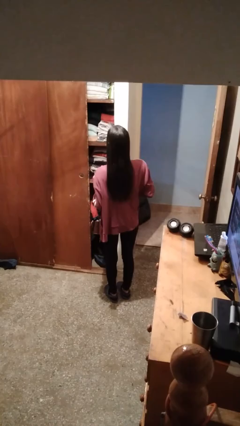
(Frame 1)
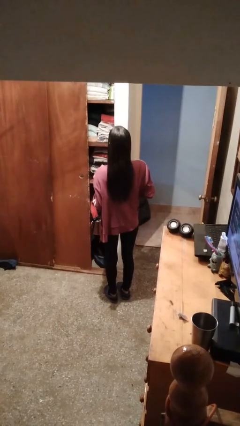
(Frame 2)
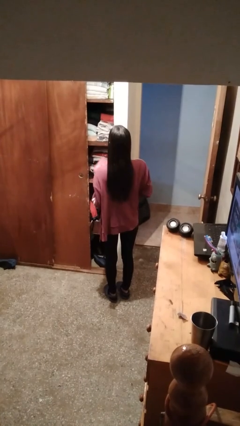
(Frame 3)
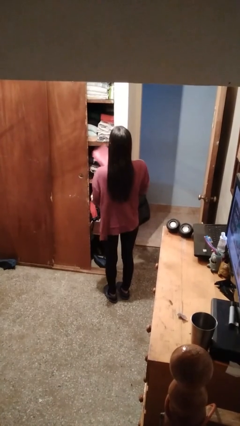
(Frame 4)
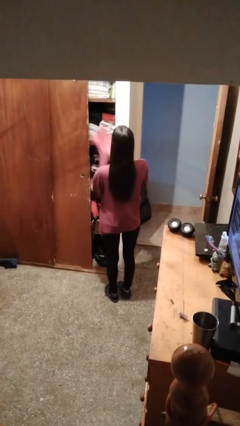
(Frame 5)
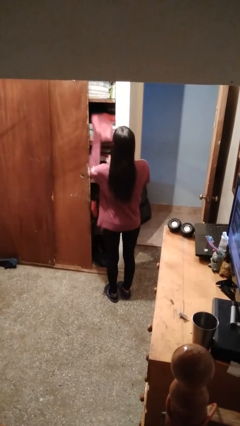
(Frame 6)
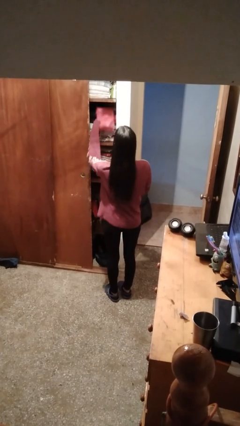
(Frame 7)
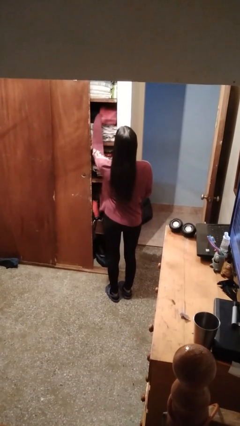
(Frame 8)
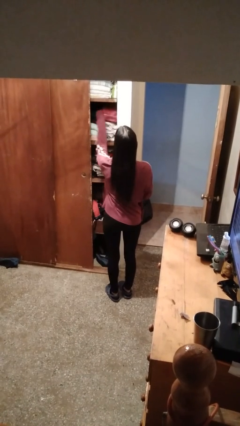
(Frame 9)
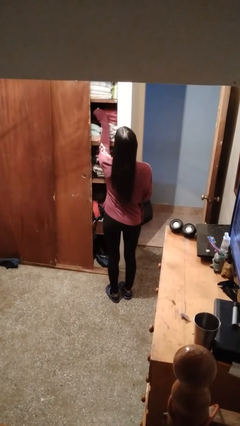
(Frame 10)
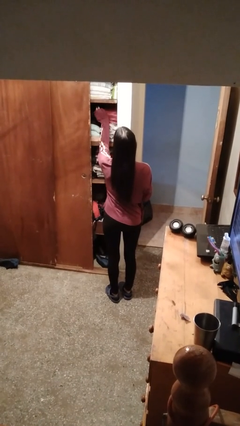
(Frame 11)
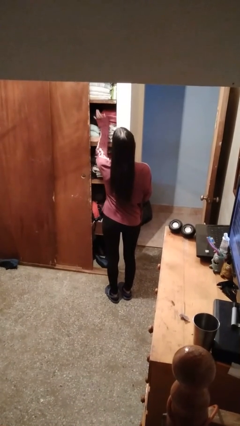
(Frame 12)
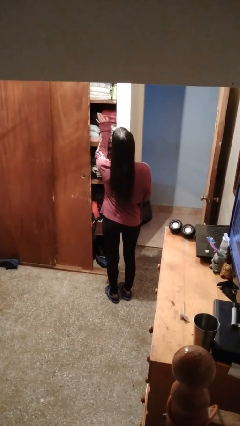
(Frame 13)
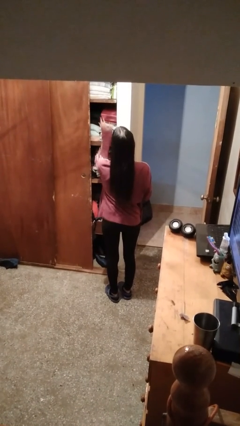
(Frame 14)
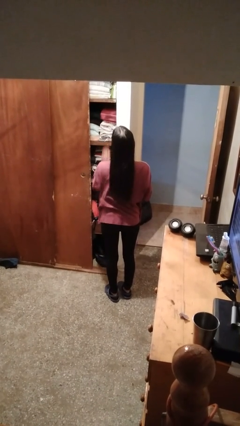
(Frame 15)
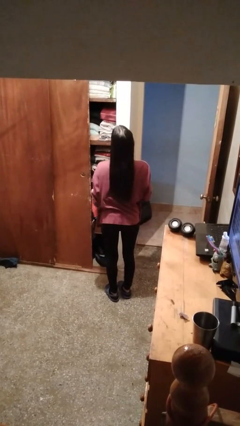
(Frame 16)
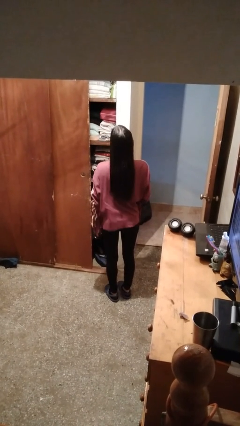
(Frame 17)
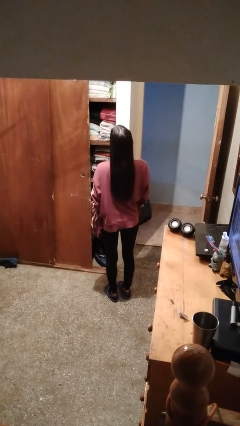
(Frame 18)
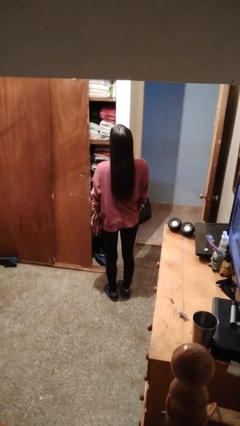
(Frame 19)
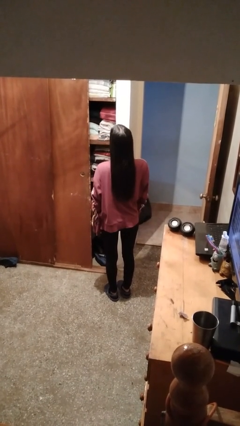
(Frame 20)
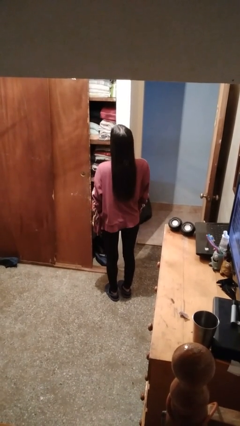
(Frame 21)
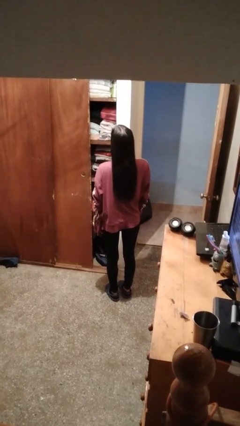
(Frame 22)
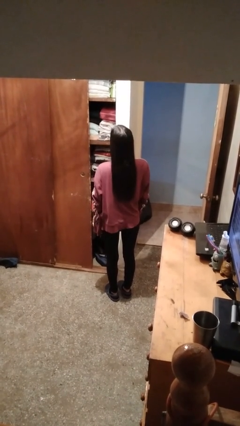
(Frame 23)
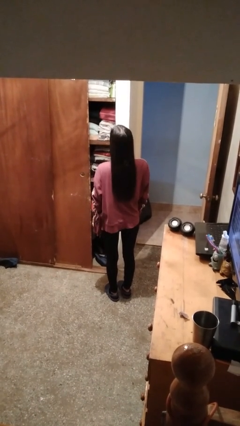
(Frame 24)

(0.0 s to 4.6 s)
person picks up object from shelf

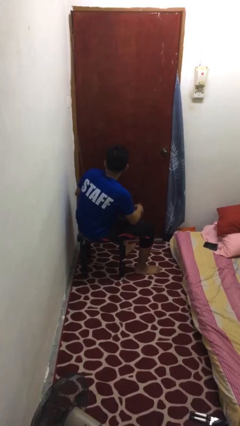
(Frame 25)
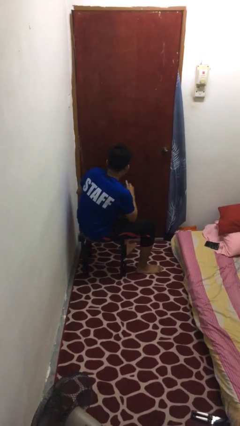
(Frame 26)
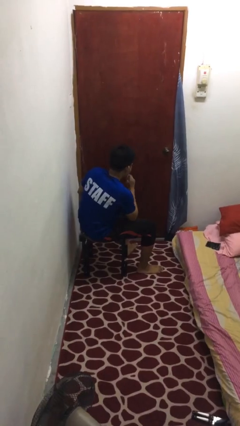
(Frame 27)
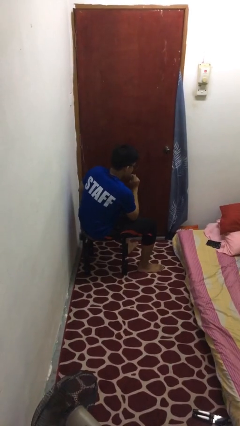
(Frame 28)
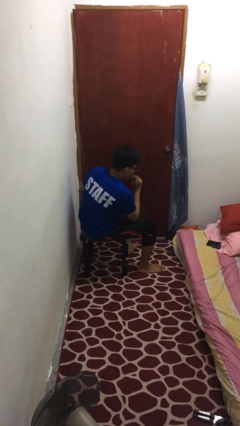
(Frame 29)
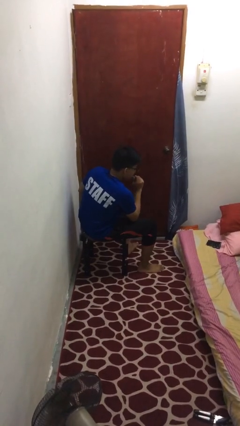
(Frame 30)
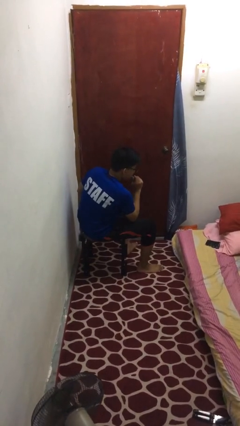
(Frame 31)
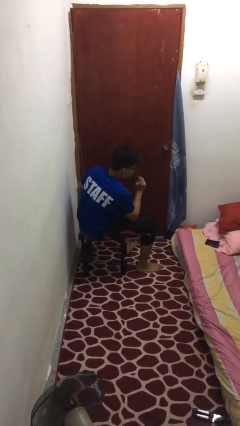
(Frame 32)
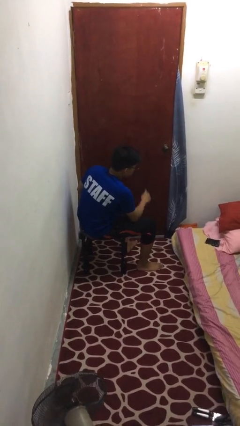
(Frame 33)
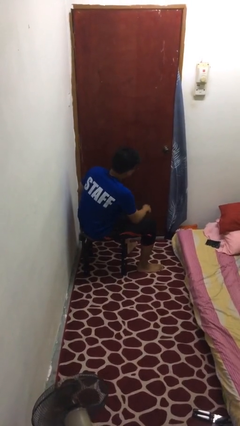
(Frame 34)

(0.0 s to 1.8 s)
person vapes

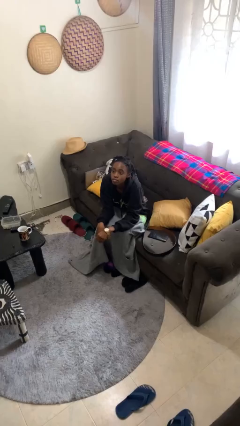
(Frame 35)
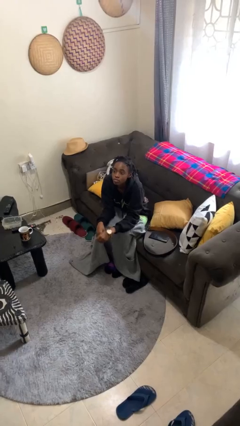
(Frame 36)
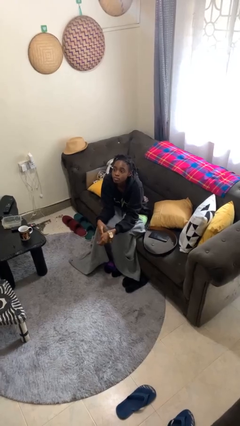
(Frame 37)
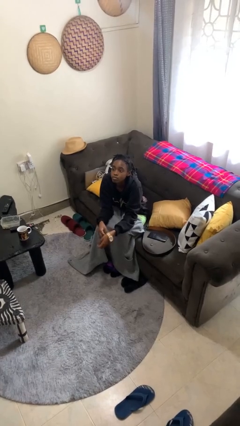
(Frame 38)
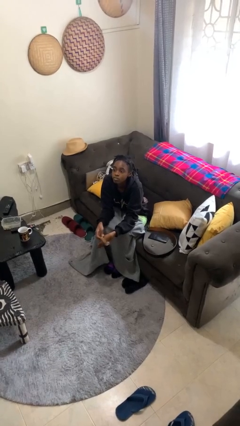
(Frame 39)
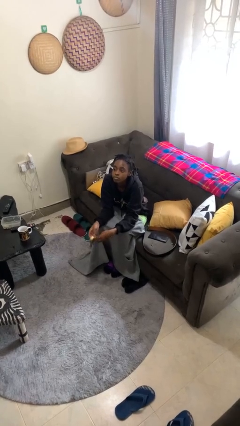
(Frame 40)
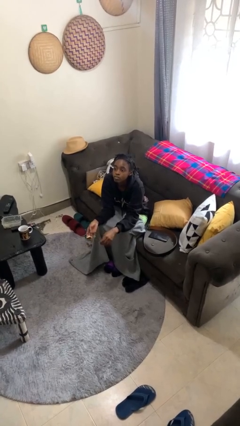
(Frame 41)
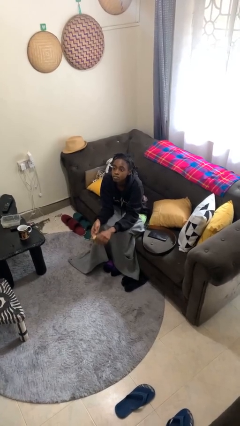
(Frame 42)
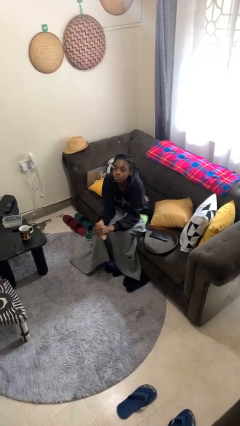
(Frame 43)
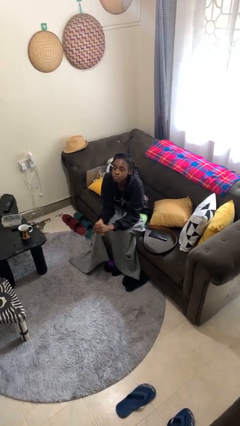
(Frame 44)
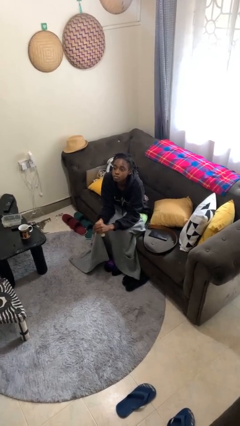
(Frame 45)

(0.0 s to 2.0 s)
person takes off wristwatch

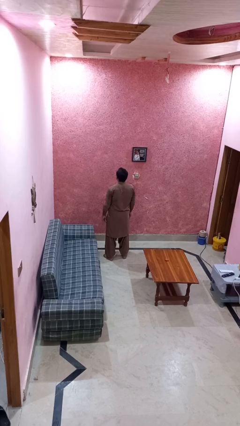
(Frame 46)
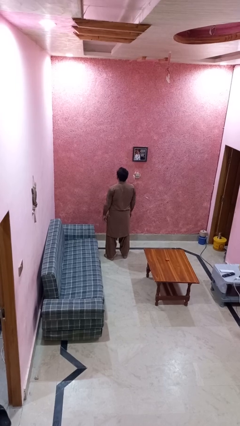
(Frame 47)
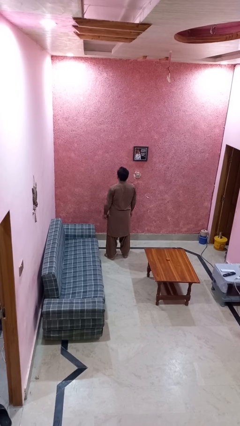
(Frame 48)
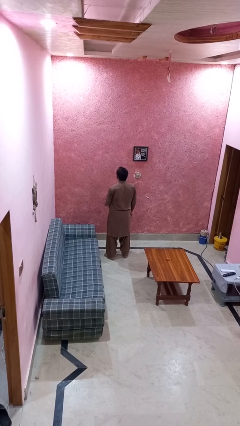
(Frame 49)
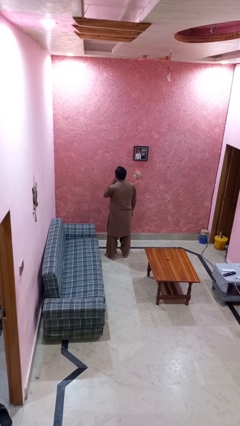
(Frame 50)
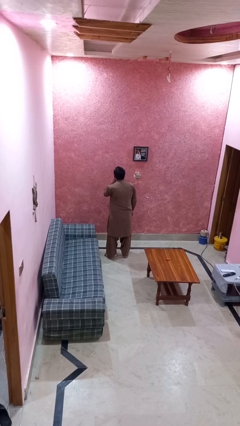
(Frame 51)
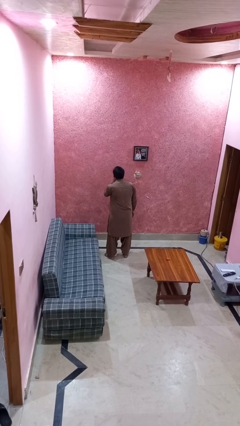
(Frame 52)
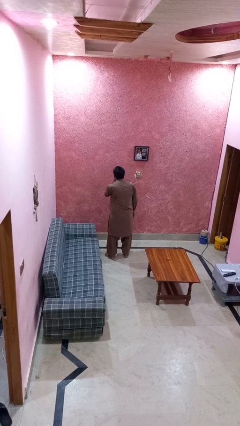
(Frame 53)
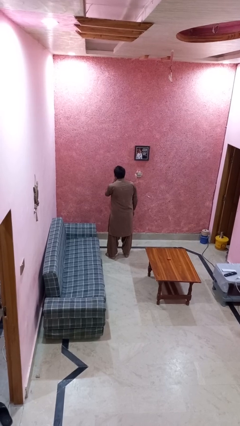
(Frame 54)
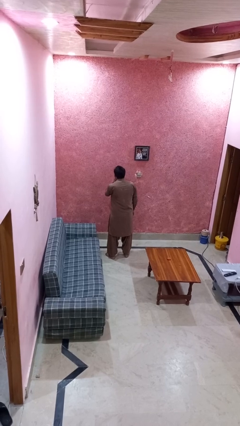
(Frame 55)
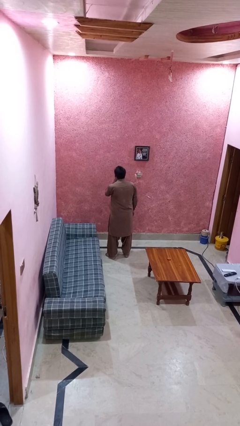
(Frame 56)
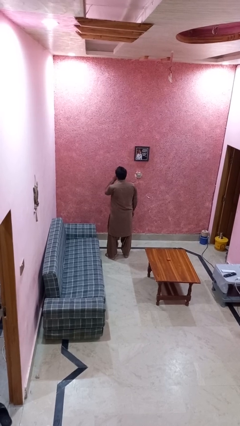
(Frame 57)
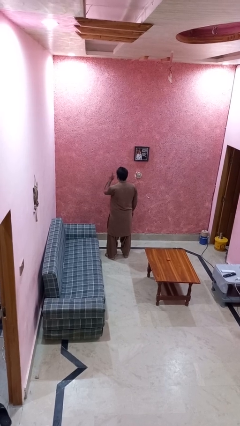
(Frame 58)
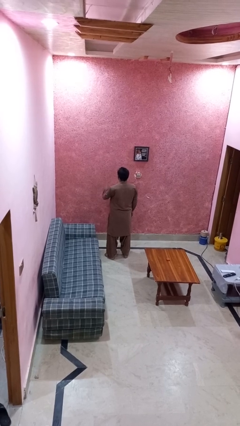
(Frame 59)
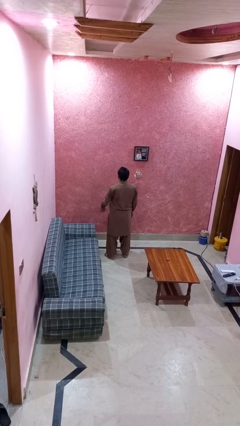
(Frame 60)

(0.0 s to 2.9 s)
person gestures be quiet

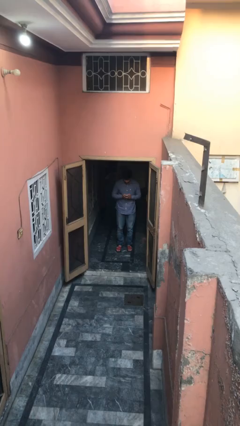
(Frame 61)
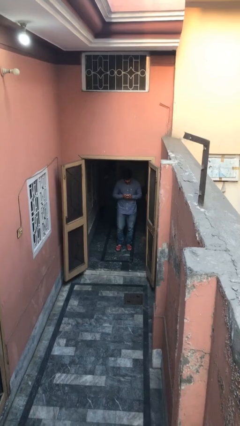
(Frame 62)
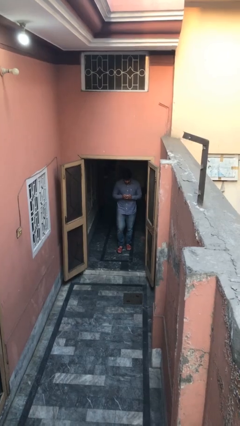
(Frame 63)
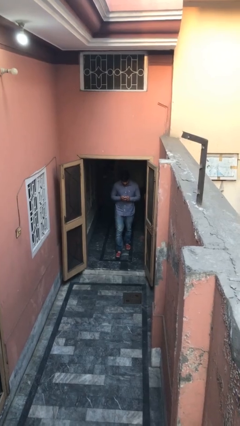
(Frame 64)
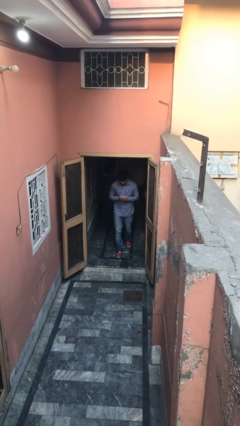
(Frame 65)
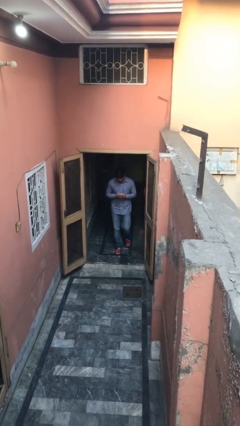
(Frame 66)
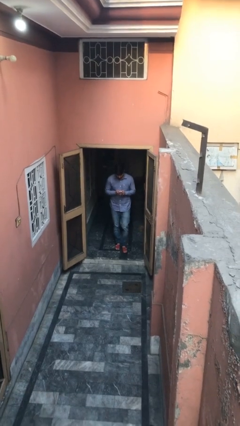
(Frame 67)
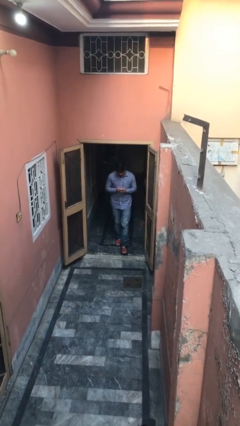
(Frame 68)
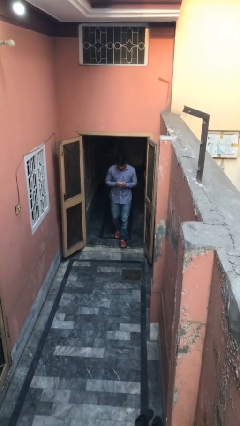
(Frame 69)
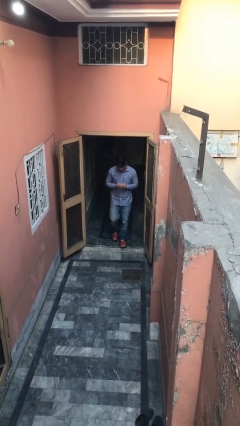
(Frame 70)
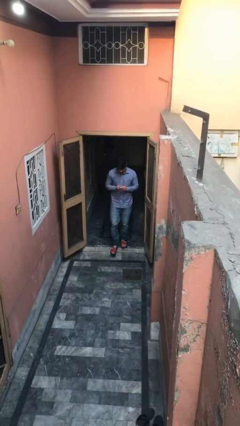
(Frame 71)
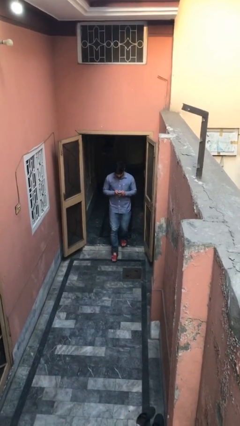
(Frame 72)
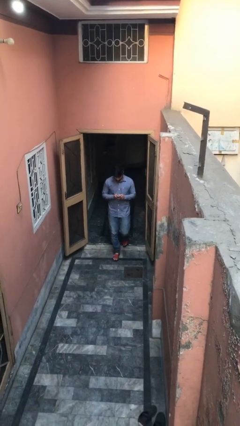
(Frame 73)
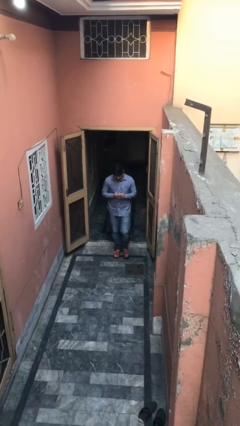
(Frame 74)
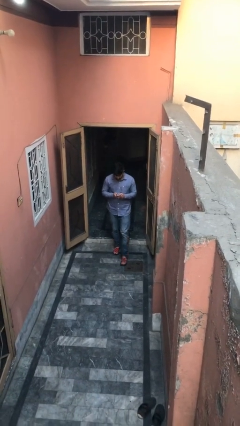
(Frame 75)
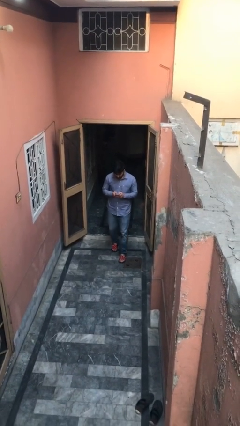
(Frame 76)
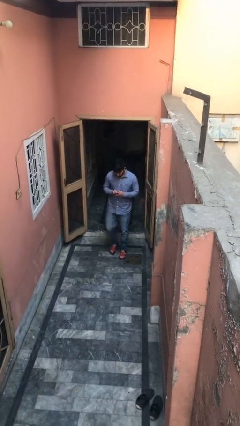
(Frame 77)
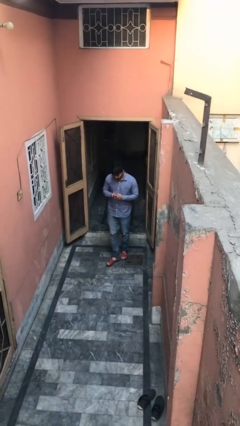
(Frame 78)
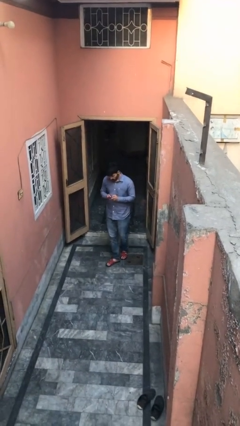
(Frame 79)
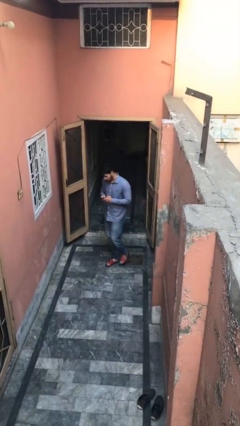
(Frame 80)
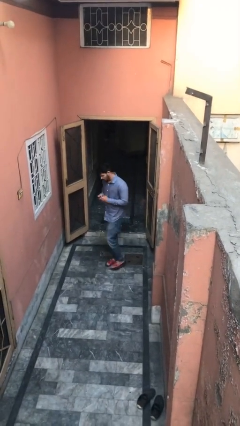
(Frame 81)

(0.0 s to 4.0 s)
person enters scene through structure

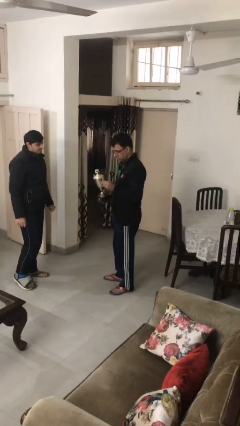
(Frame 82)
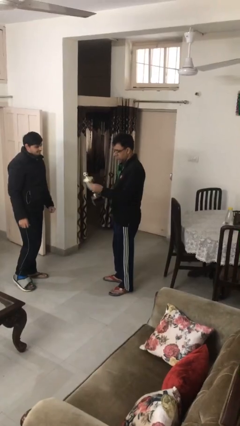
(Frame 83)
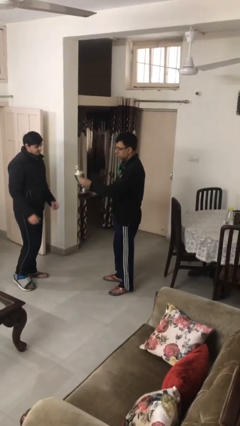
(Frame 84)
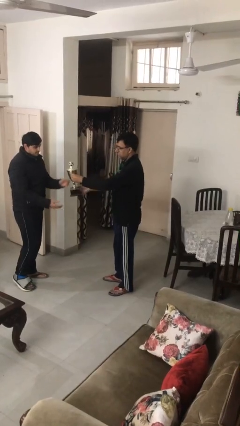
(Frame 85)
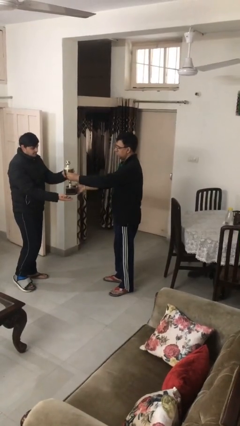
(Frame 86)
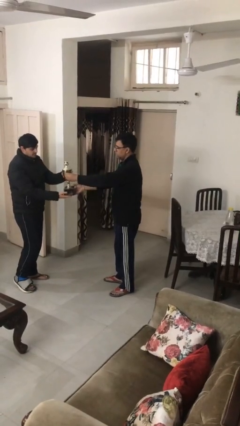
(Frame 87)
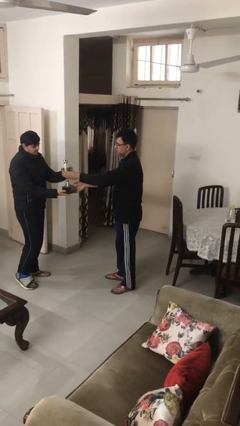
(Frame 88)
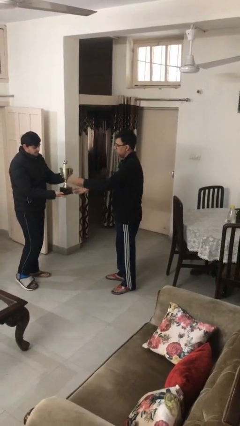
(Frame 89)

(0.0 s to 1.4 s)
person transfers object to person

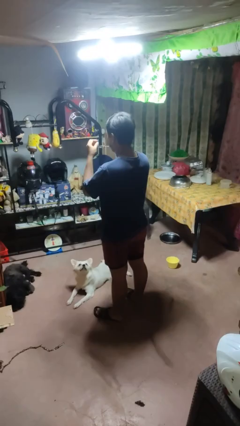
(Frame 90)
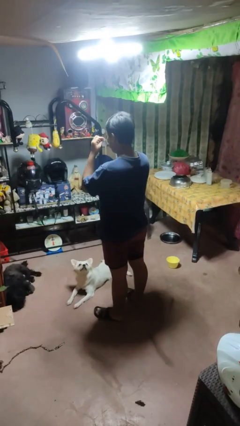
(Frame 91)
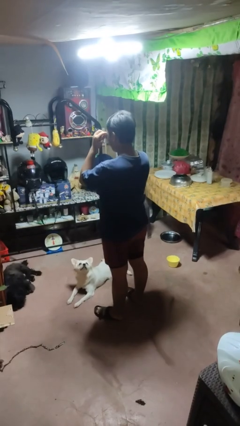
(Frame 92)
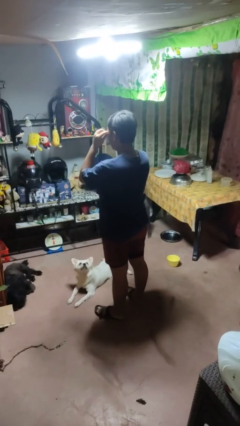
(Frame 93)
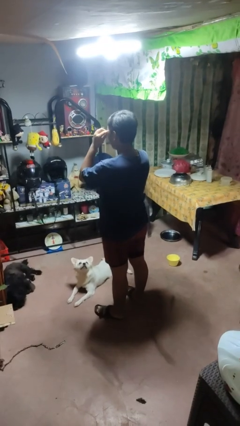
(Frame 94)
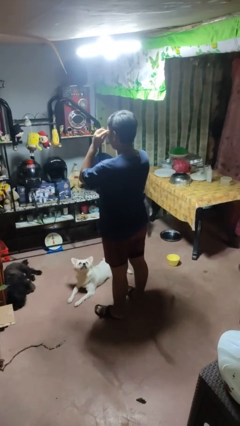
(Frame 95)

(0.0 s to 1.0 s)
person puts on sunglasses
